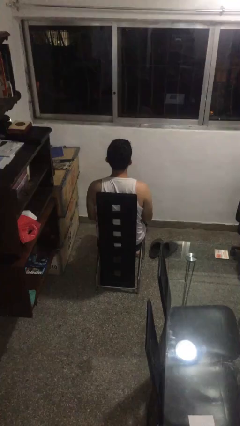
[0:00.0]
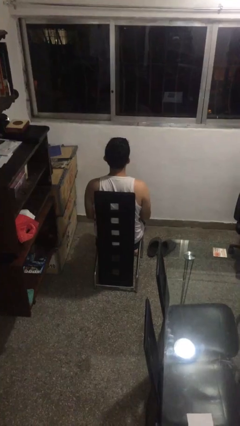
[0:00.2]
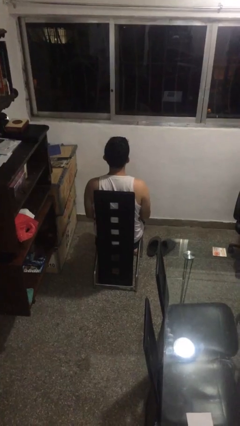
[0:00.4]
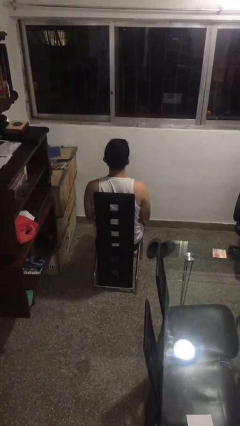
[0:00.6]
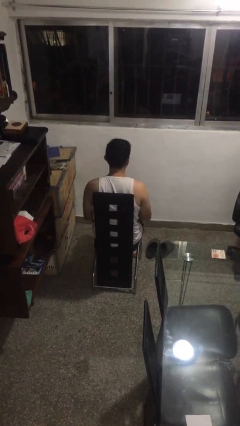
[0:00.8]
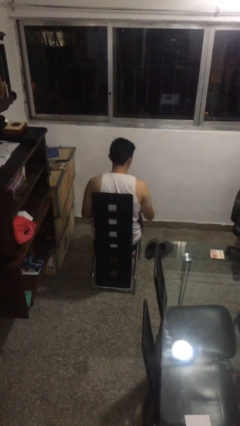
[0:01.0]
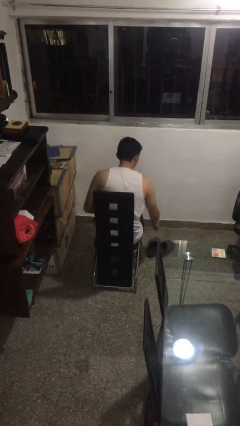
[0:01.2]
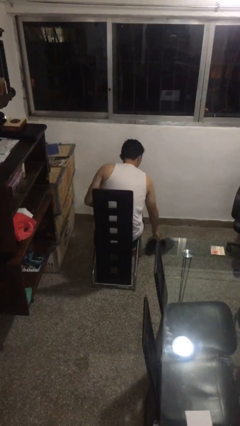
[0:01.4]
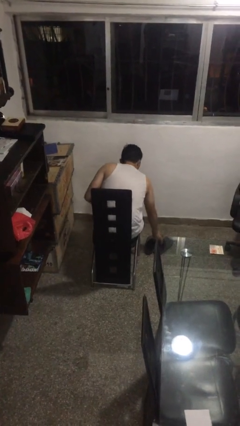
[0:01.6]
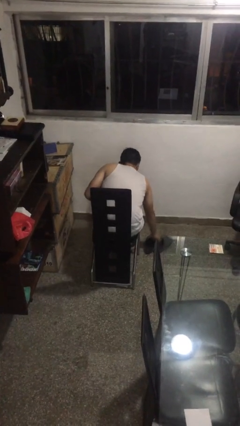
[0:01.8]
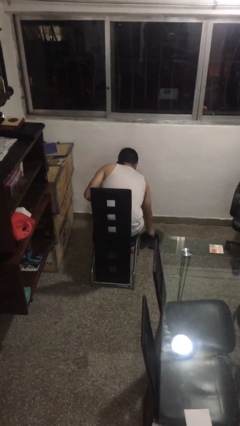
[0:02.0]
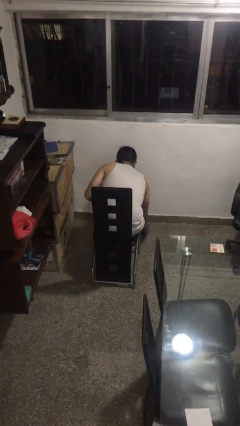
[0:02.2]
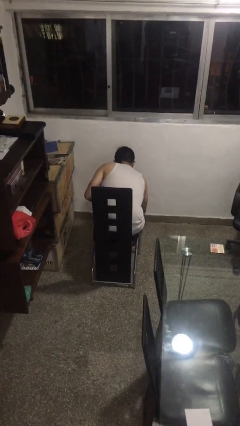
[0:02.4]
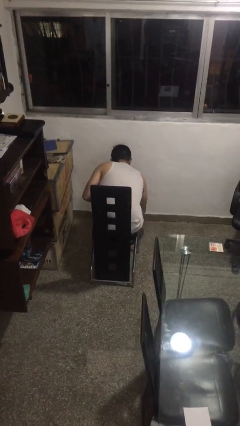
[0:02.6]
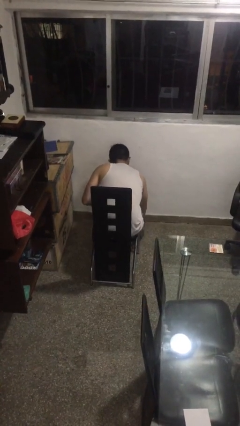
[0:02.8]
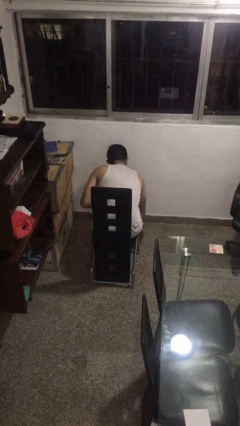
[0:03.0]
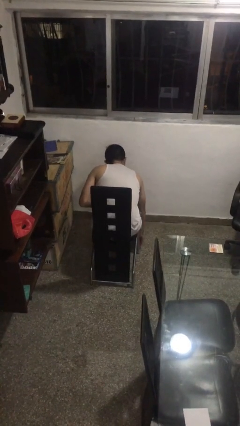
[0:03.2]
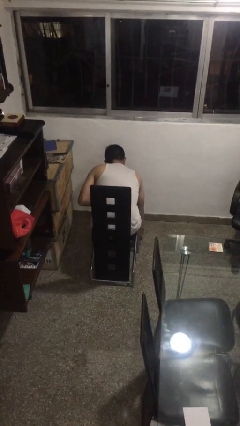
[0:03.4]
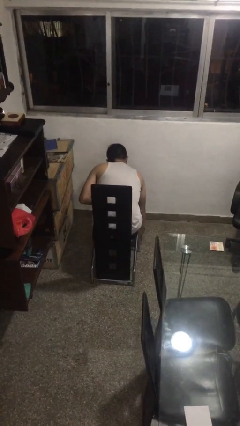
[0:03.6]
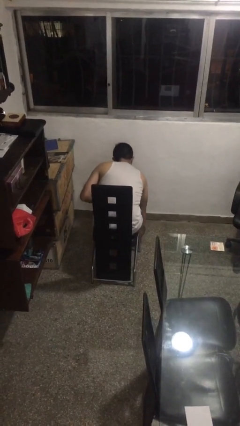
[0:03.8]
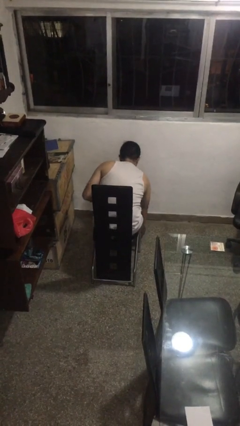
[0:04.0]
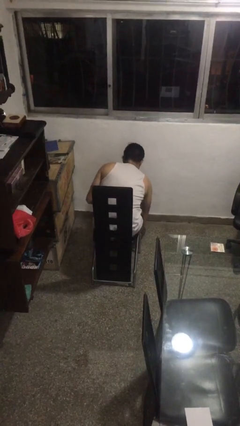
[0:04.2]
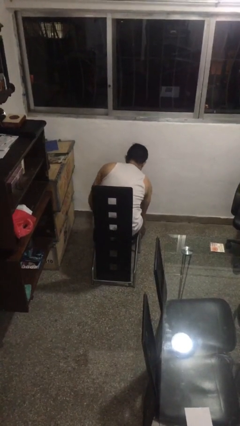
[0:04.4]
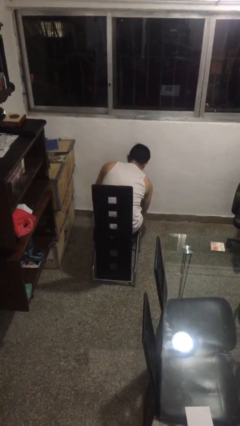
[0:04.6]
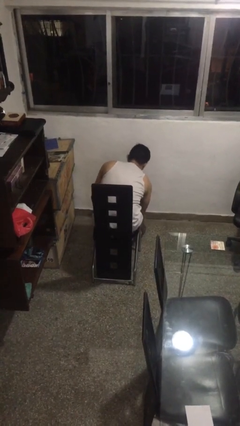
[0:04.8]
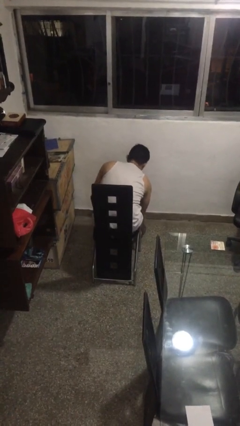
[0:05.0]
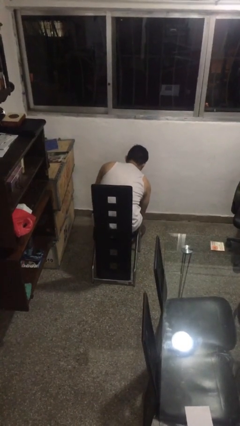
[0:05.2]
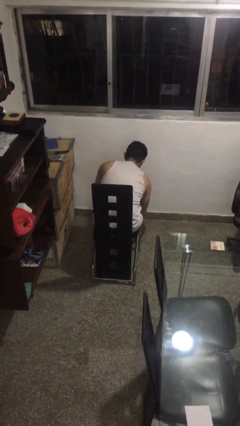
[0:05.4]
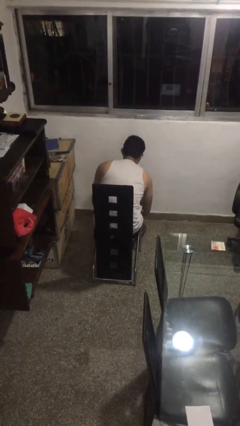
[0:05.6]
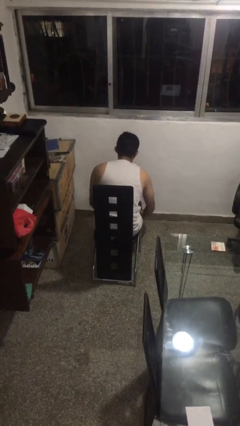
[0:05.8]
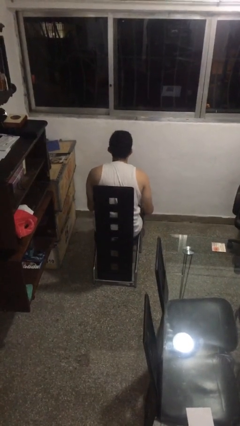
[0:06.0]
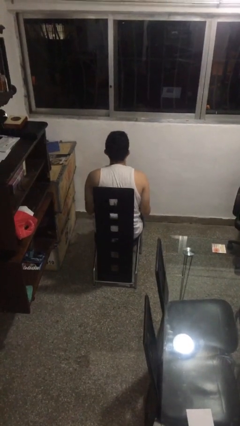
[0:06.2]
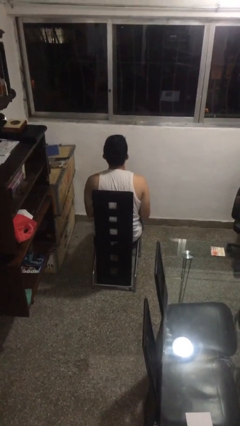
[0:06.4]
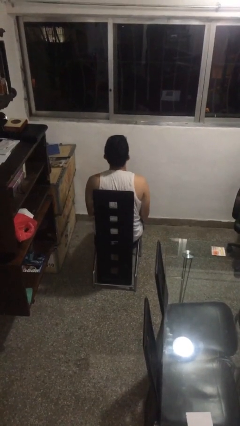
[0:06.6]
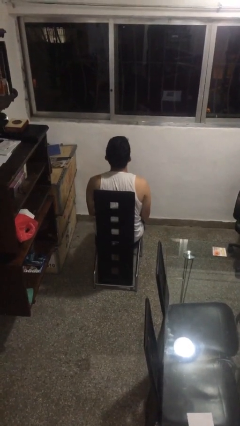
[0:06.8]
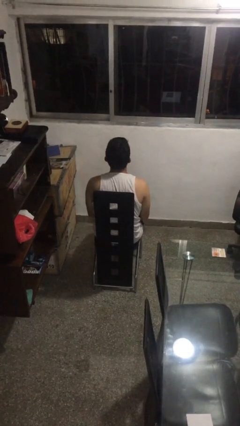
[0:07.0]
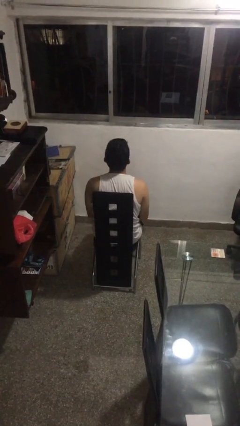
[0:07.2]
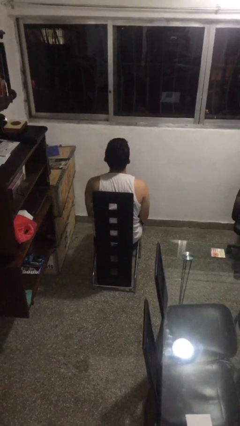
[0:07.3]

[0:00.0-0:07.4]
person puts on shoes

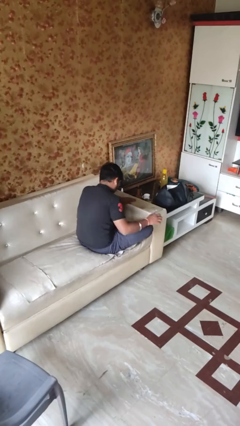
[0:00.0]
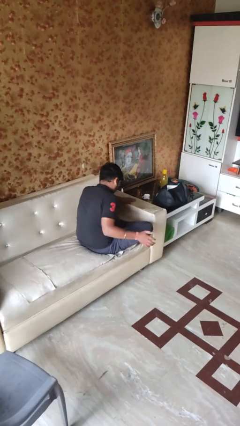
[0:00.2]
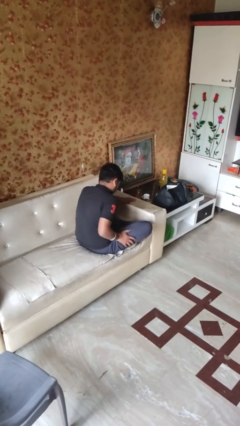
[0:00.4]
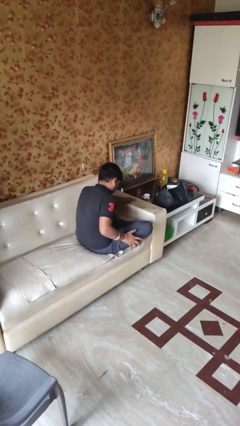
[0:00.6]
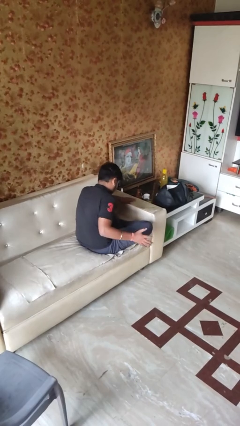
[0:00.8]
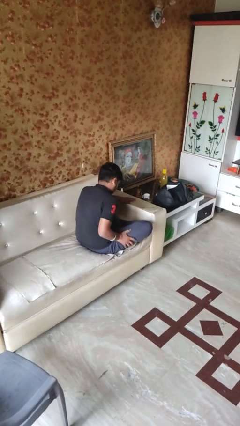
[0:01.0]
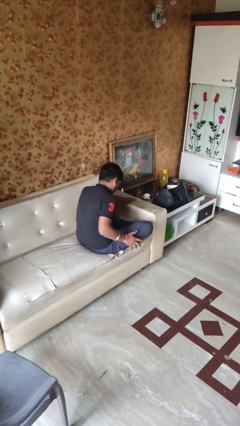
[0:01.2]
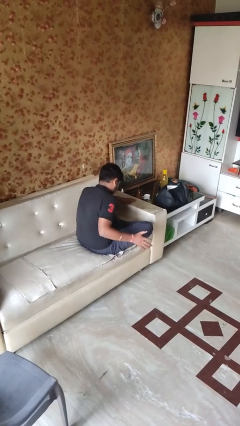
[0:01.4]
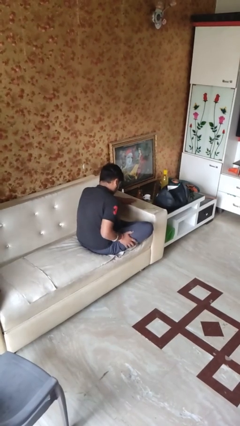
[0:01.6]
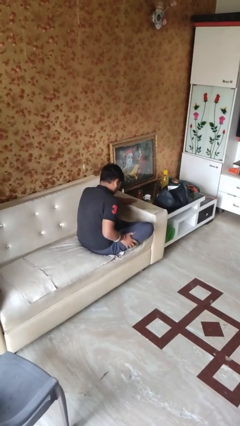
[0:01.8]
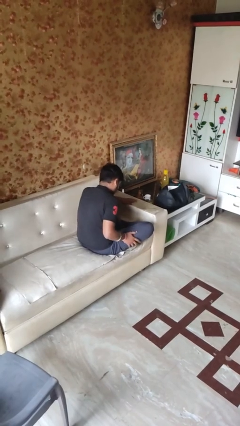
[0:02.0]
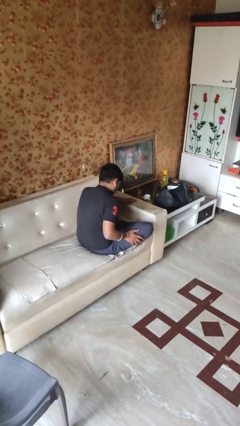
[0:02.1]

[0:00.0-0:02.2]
person slaps hands on thighs

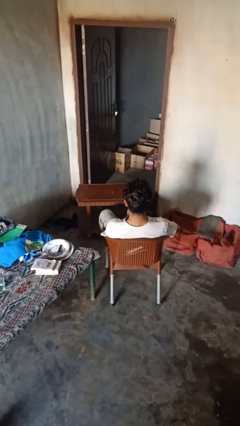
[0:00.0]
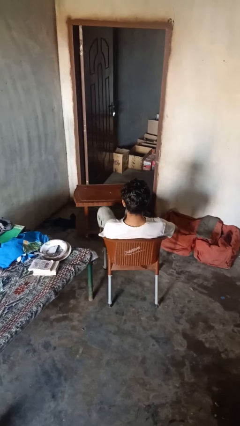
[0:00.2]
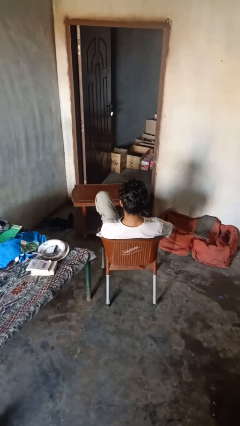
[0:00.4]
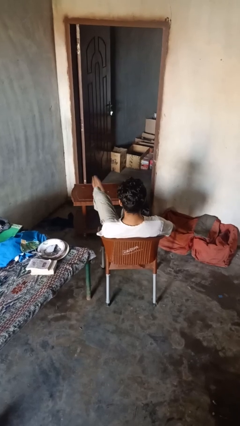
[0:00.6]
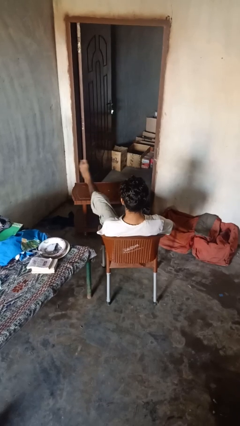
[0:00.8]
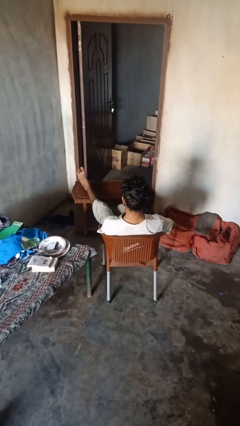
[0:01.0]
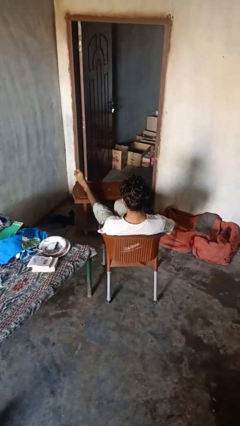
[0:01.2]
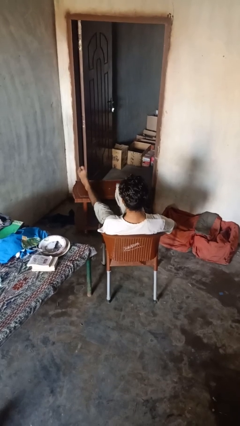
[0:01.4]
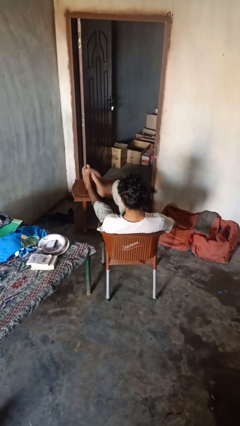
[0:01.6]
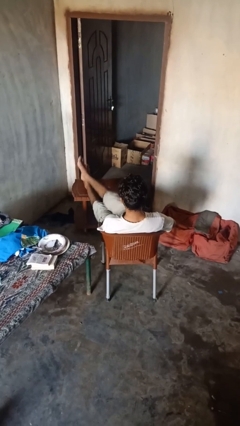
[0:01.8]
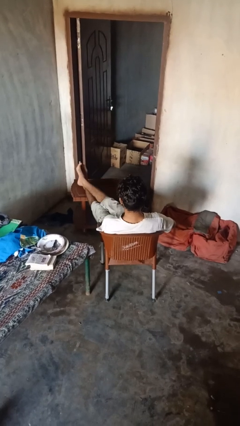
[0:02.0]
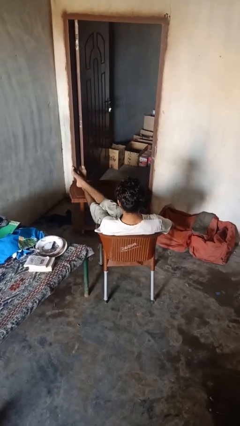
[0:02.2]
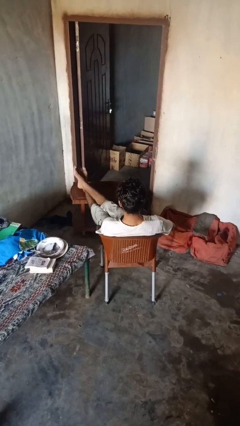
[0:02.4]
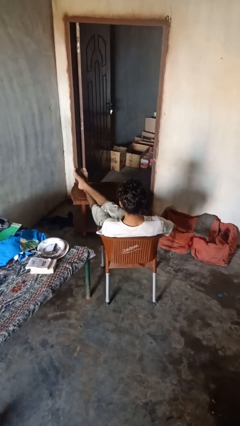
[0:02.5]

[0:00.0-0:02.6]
person puts feet up

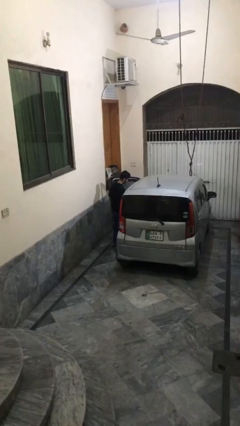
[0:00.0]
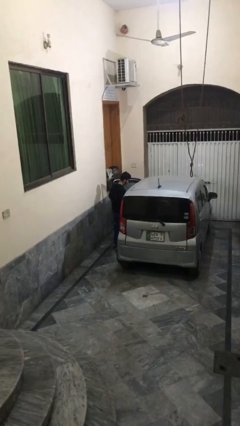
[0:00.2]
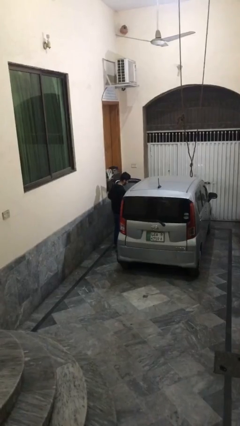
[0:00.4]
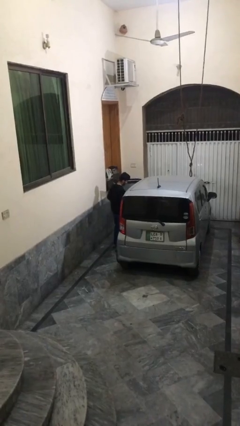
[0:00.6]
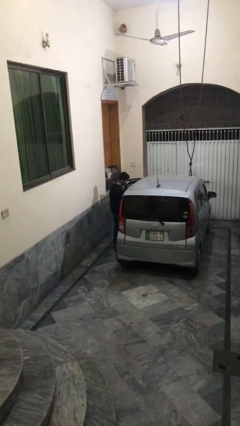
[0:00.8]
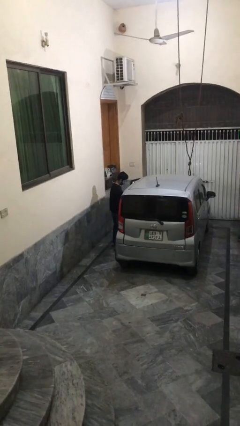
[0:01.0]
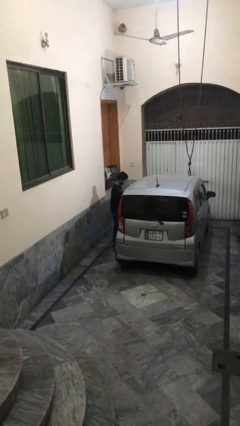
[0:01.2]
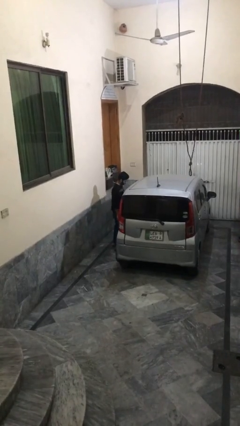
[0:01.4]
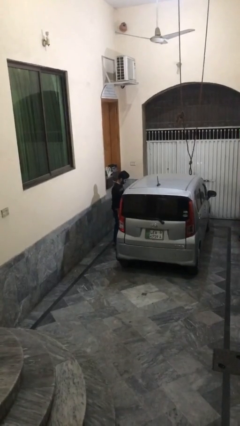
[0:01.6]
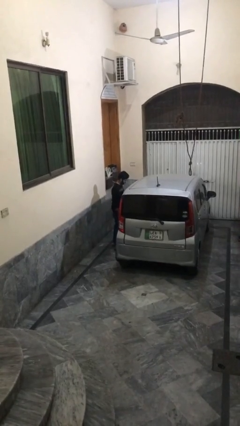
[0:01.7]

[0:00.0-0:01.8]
person closes car door

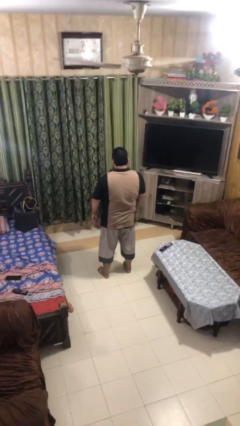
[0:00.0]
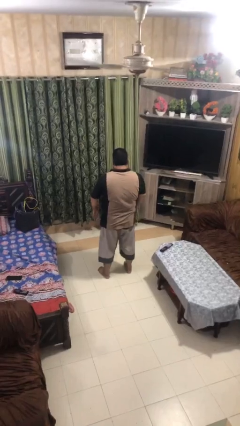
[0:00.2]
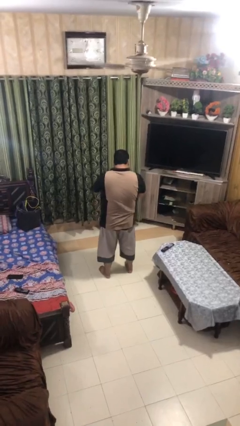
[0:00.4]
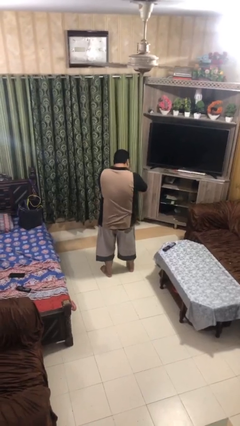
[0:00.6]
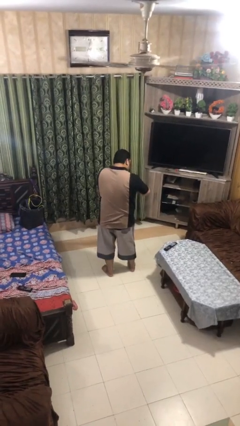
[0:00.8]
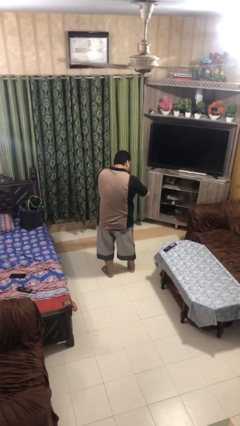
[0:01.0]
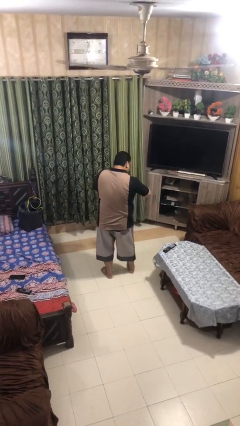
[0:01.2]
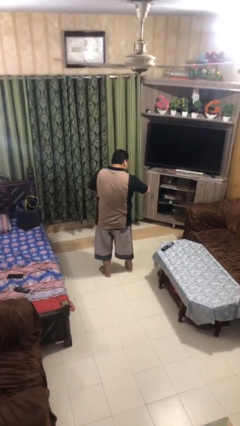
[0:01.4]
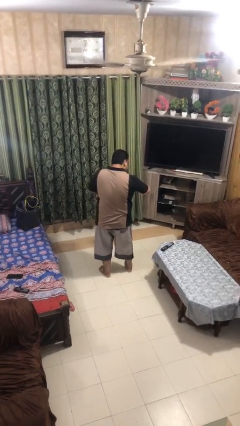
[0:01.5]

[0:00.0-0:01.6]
person swats bug

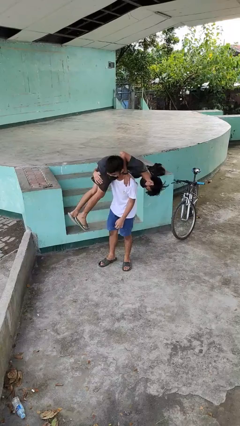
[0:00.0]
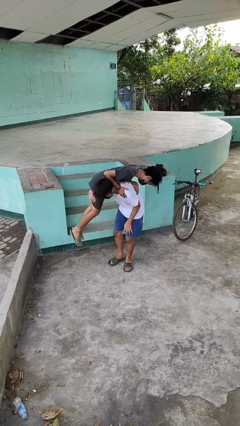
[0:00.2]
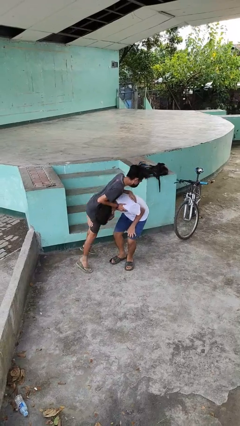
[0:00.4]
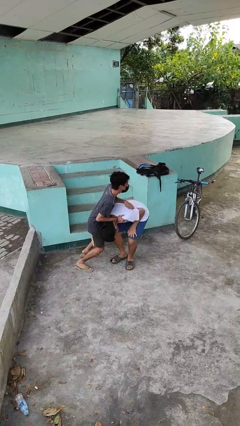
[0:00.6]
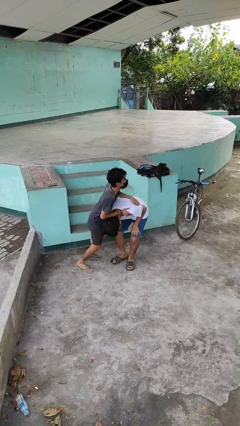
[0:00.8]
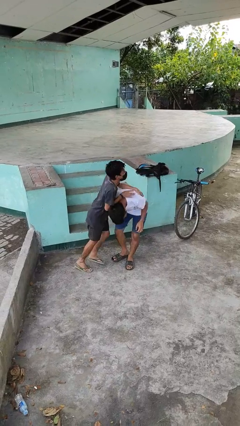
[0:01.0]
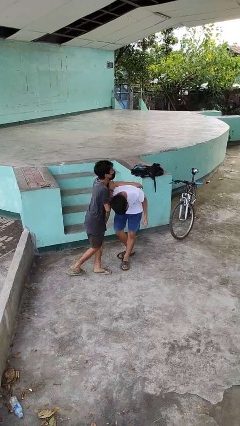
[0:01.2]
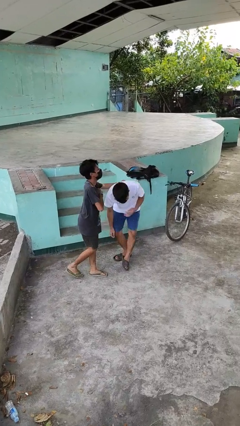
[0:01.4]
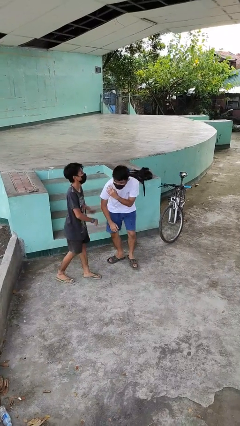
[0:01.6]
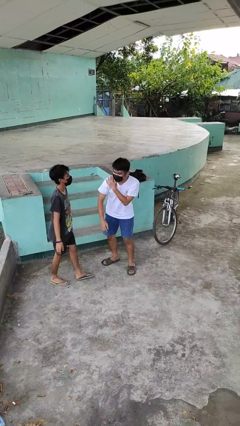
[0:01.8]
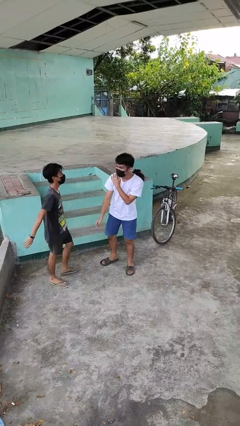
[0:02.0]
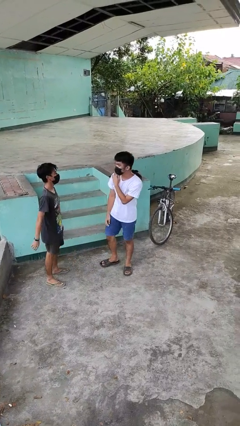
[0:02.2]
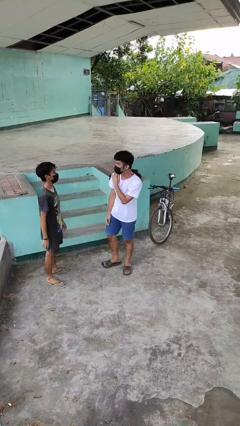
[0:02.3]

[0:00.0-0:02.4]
person puts down person
